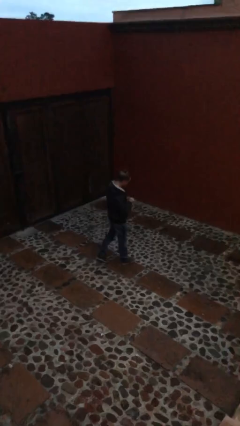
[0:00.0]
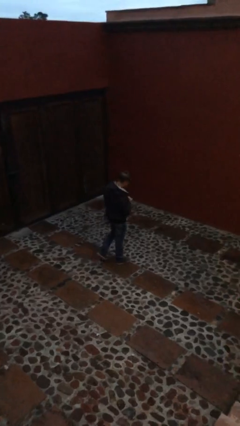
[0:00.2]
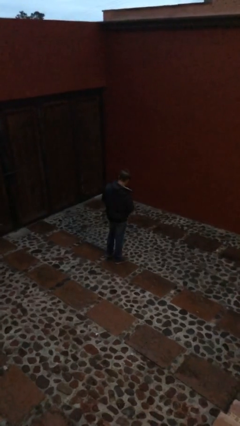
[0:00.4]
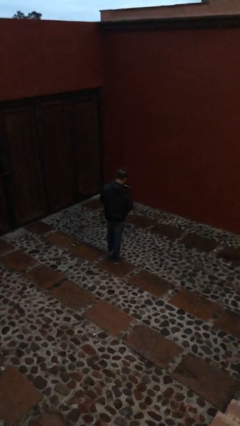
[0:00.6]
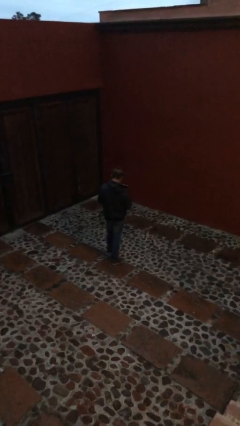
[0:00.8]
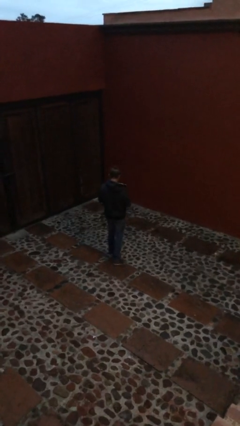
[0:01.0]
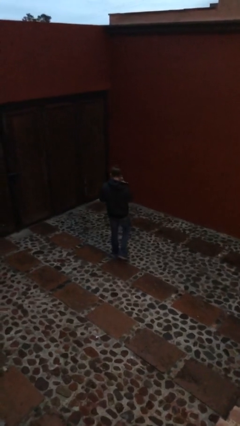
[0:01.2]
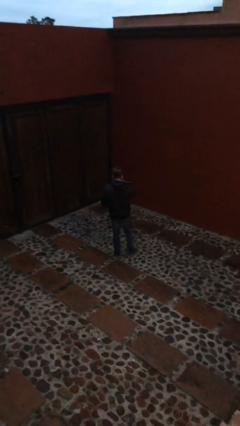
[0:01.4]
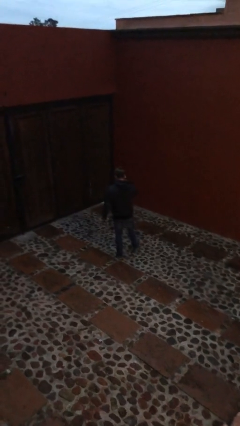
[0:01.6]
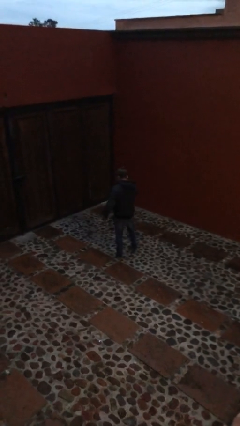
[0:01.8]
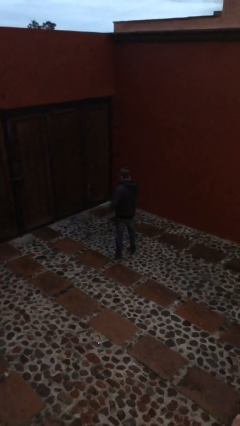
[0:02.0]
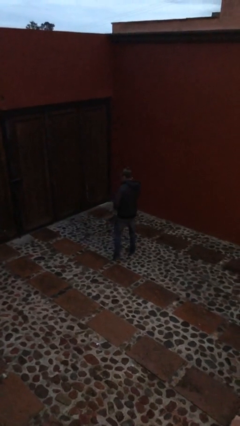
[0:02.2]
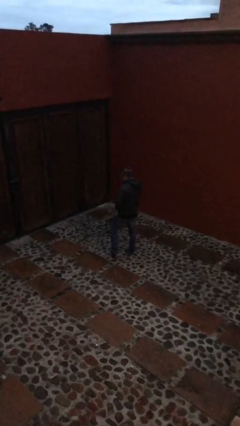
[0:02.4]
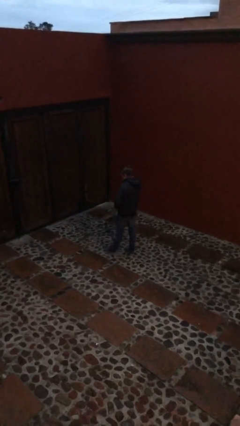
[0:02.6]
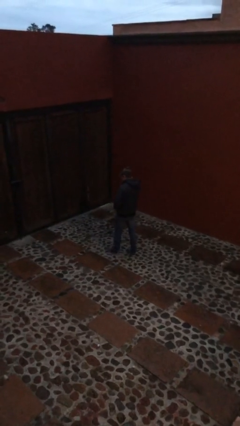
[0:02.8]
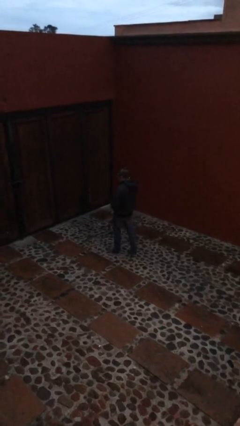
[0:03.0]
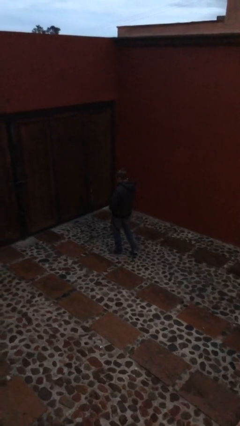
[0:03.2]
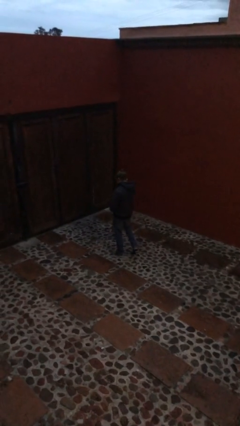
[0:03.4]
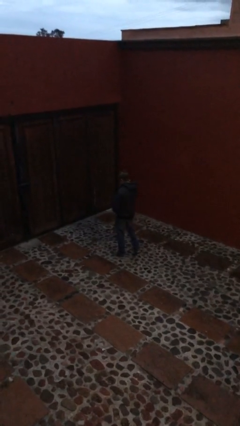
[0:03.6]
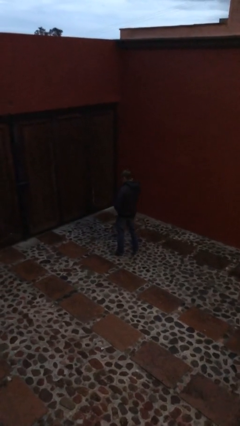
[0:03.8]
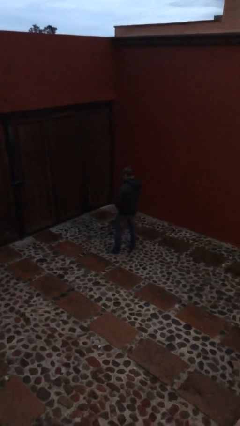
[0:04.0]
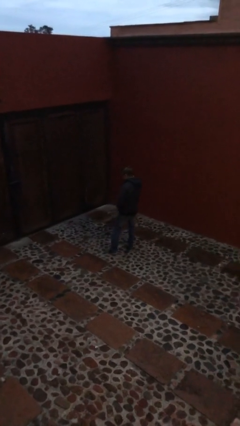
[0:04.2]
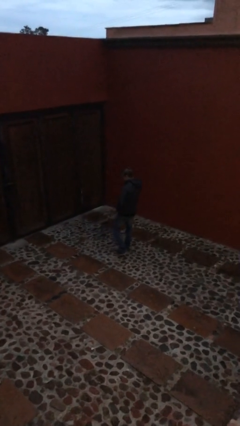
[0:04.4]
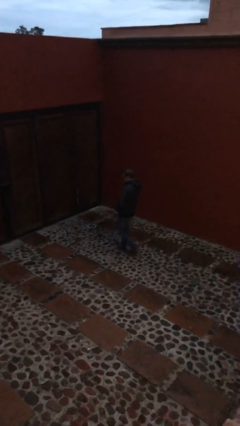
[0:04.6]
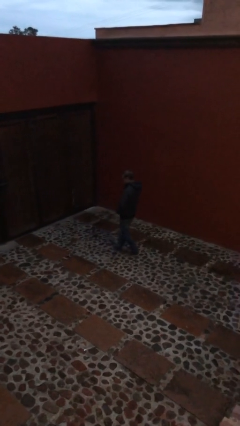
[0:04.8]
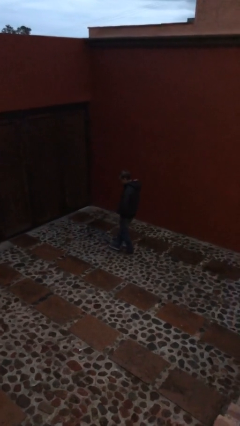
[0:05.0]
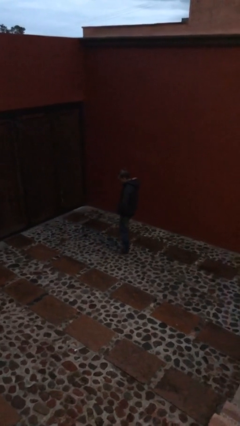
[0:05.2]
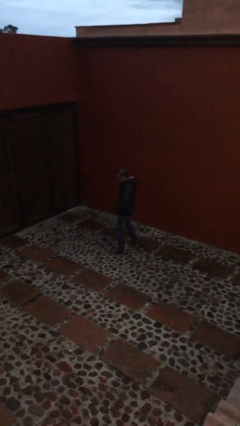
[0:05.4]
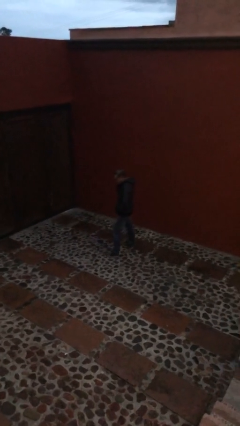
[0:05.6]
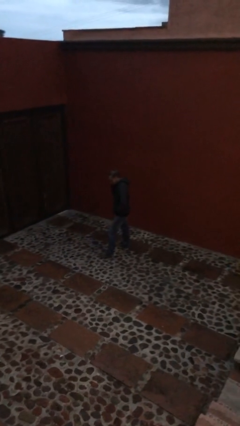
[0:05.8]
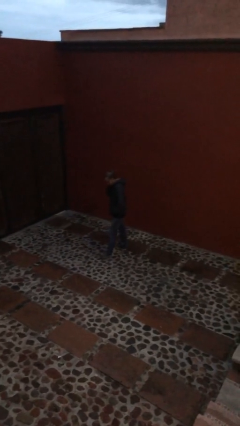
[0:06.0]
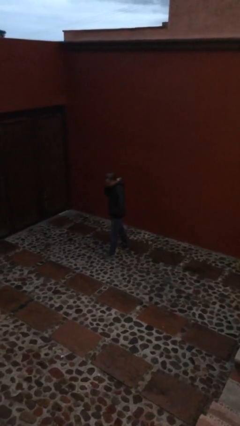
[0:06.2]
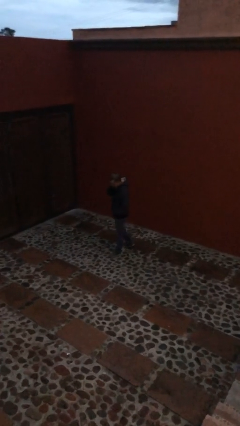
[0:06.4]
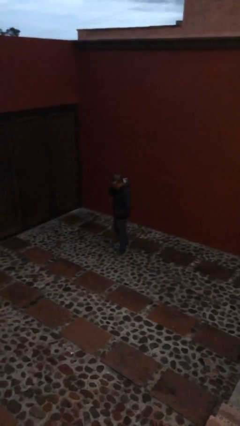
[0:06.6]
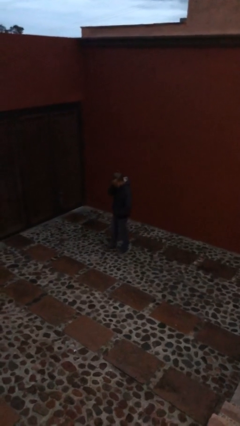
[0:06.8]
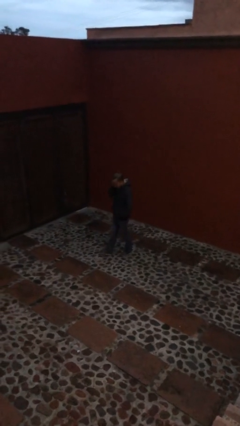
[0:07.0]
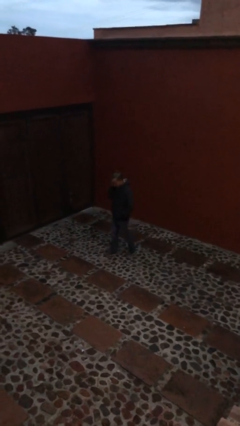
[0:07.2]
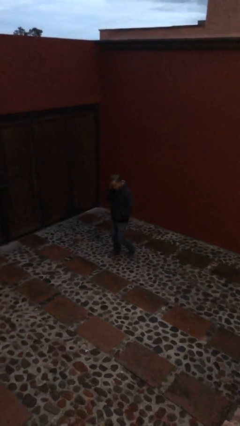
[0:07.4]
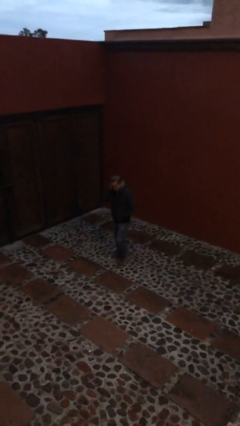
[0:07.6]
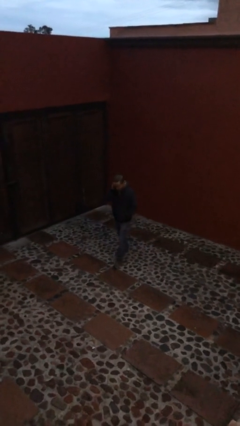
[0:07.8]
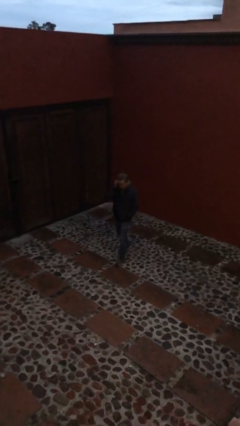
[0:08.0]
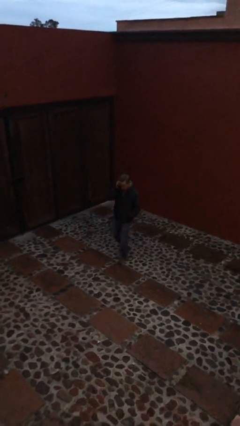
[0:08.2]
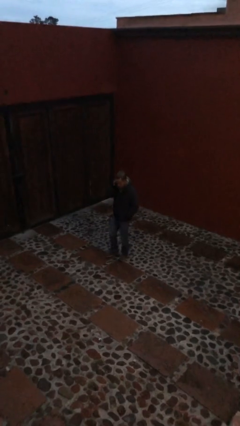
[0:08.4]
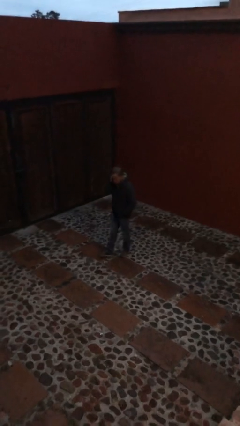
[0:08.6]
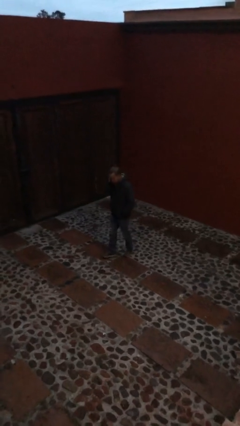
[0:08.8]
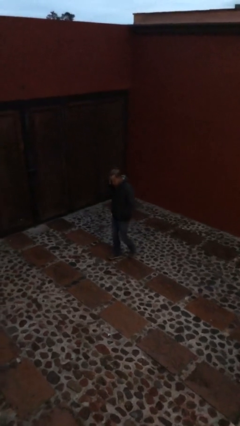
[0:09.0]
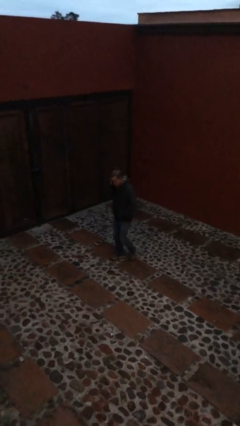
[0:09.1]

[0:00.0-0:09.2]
person talks on phone

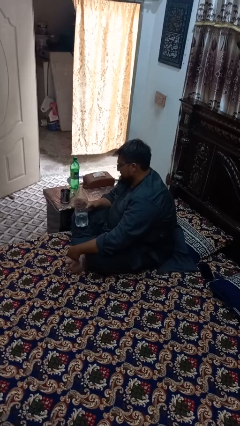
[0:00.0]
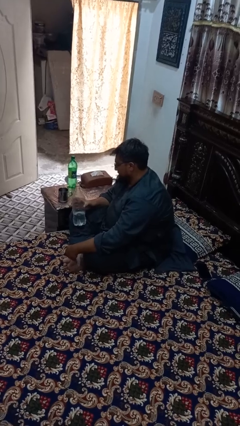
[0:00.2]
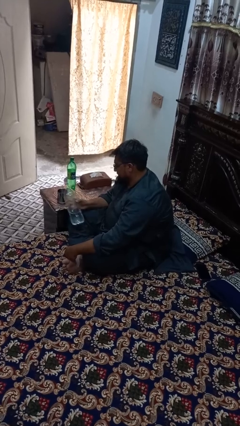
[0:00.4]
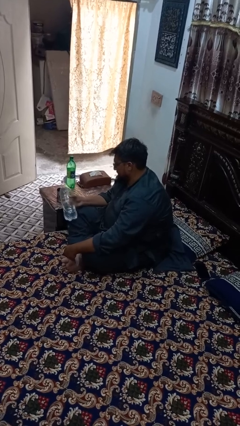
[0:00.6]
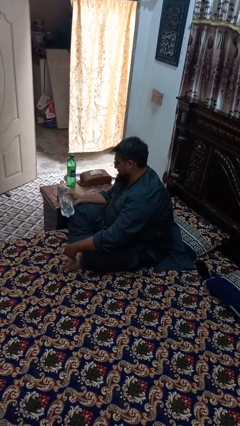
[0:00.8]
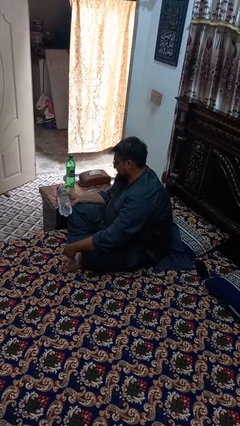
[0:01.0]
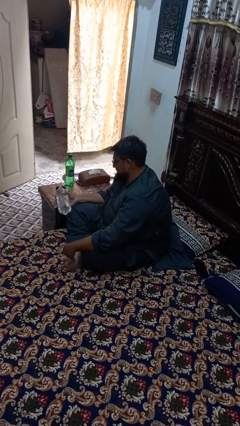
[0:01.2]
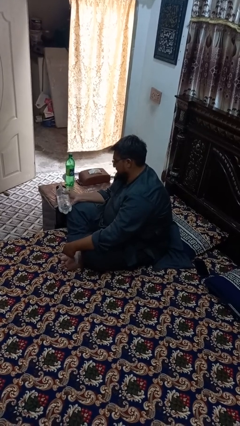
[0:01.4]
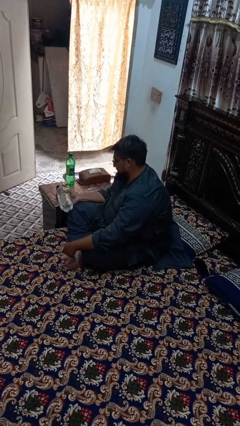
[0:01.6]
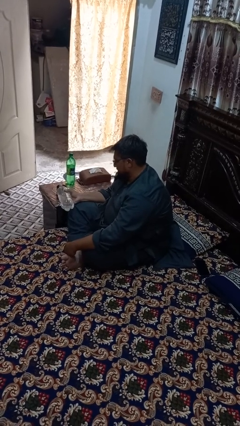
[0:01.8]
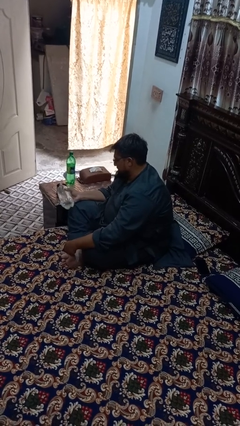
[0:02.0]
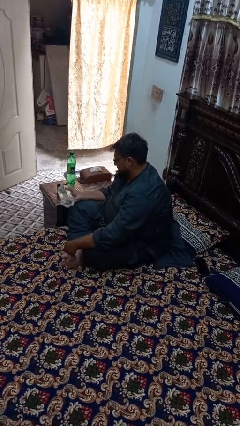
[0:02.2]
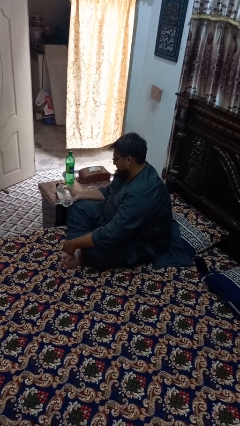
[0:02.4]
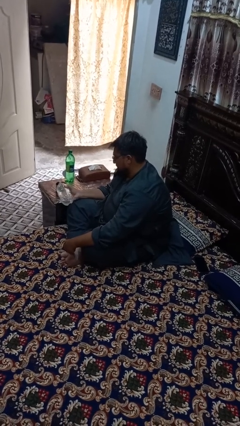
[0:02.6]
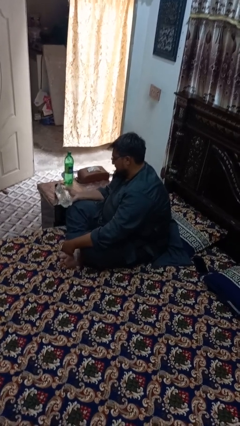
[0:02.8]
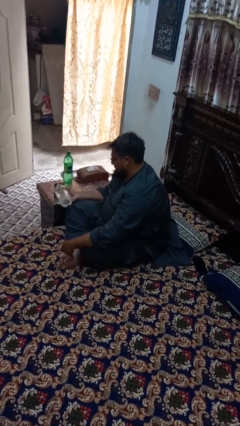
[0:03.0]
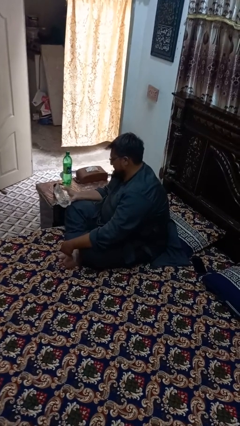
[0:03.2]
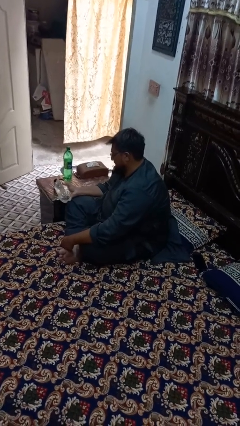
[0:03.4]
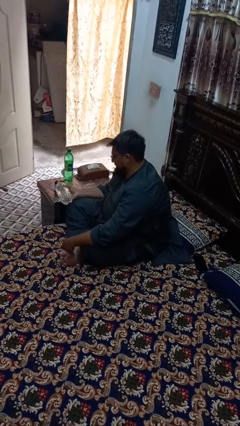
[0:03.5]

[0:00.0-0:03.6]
person pours liquid into cup

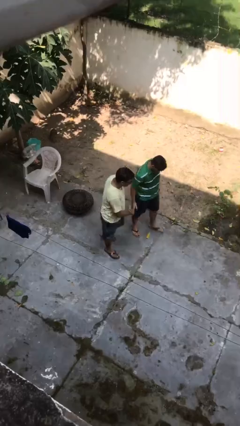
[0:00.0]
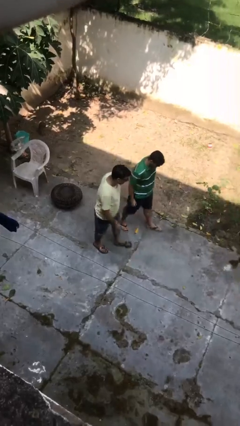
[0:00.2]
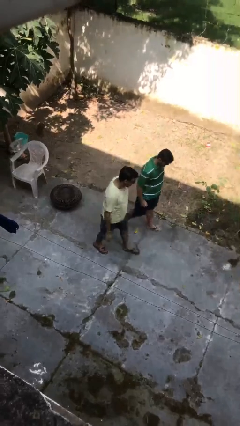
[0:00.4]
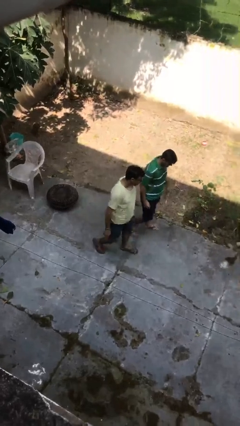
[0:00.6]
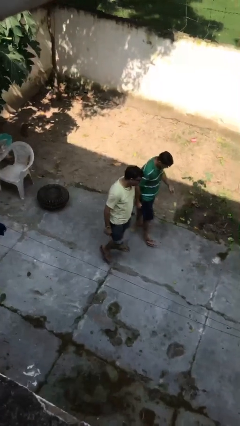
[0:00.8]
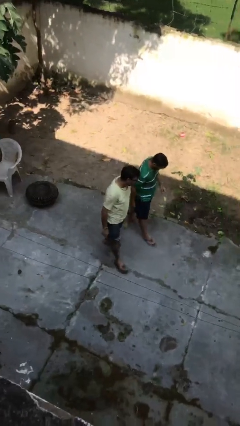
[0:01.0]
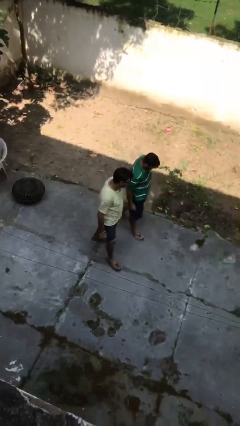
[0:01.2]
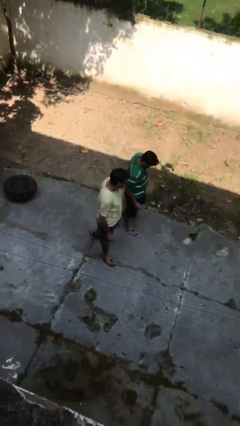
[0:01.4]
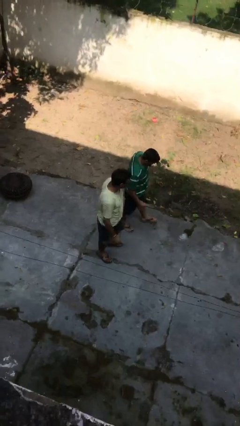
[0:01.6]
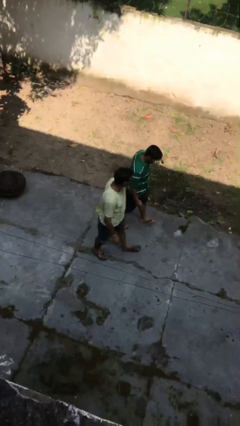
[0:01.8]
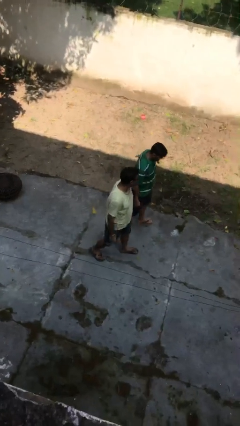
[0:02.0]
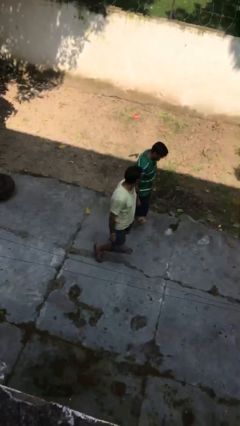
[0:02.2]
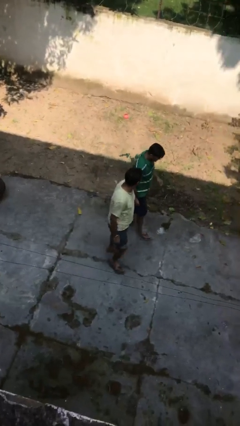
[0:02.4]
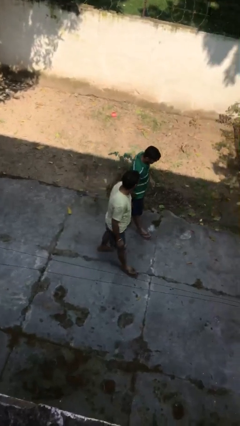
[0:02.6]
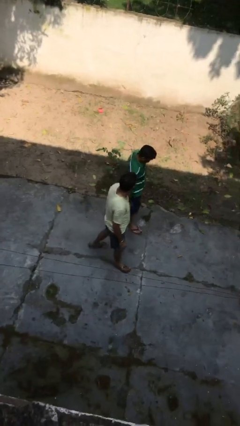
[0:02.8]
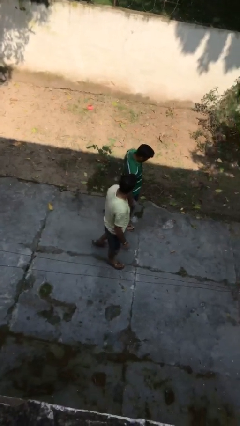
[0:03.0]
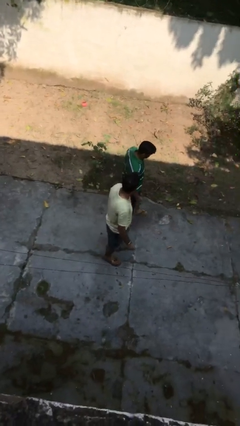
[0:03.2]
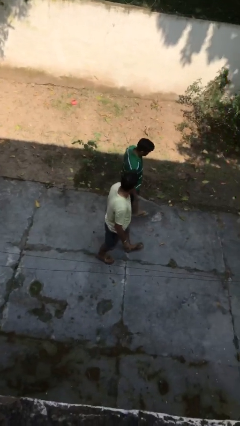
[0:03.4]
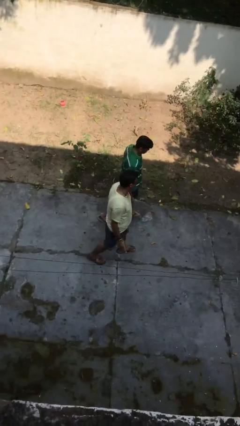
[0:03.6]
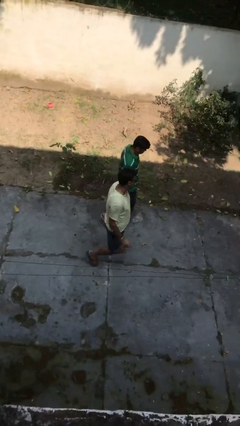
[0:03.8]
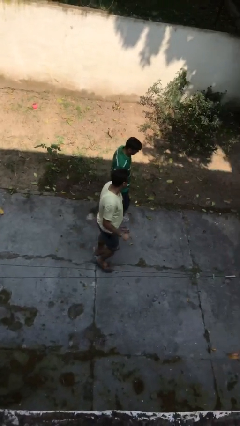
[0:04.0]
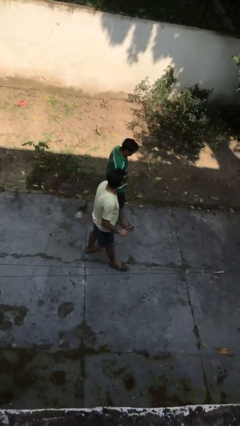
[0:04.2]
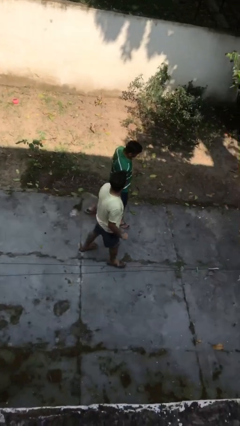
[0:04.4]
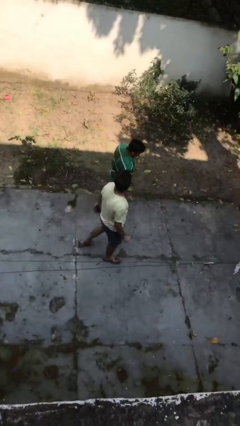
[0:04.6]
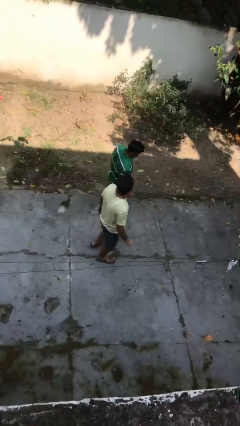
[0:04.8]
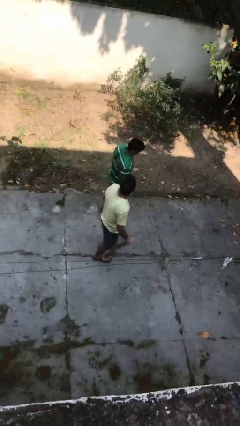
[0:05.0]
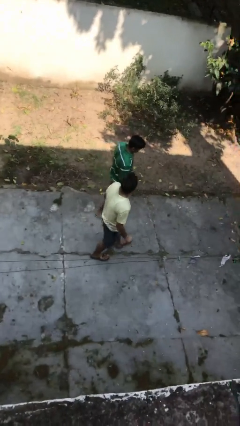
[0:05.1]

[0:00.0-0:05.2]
person talks to person
